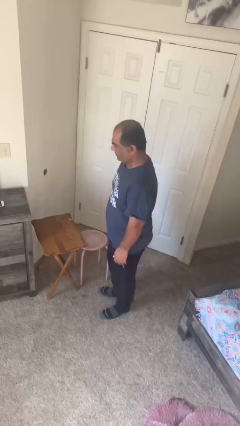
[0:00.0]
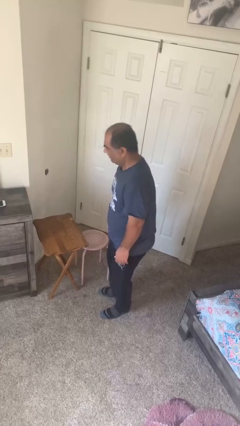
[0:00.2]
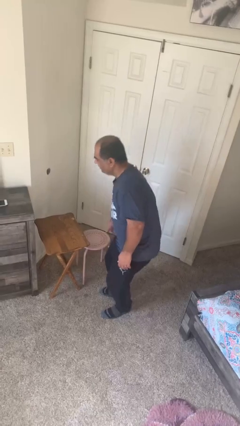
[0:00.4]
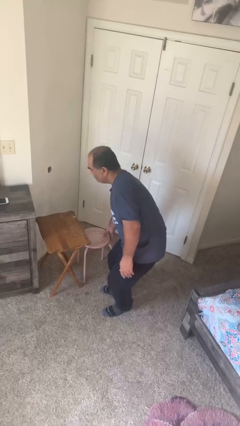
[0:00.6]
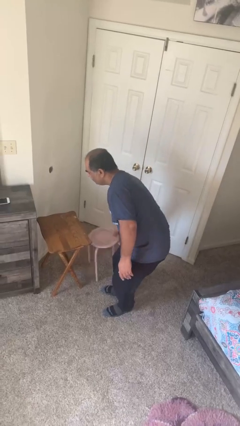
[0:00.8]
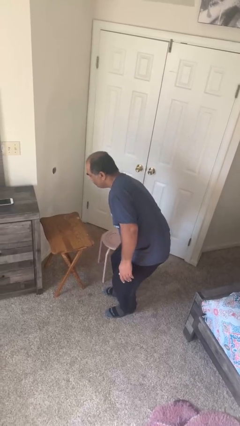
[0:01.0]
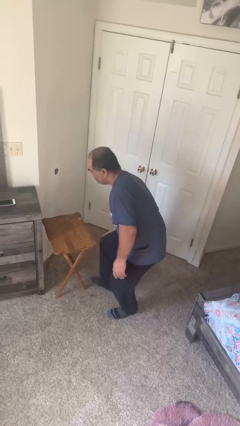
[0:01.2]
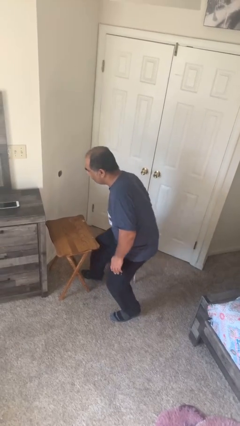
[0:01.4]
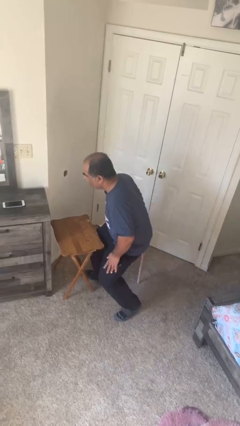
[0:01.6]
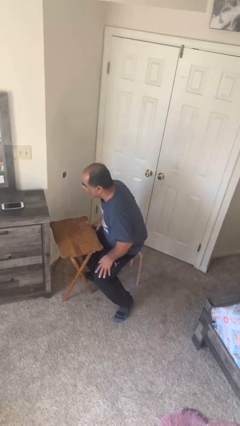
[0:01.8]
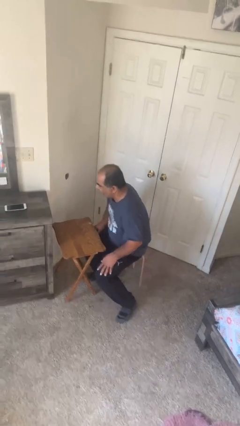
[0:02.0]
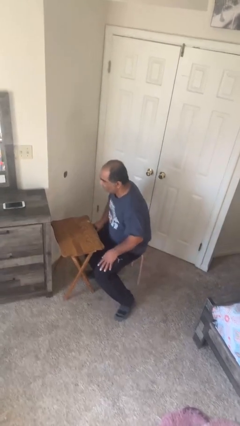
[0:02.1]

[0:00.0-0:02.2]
person sits down

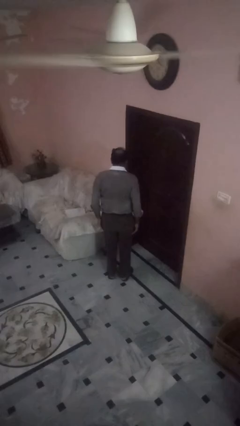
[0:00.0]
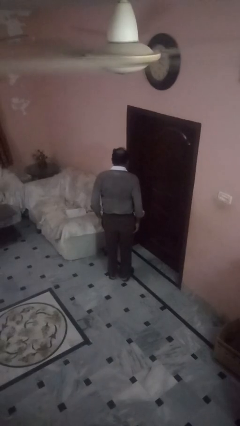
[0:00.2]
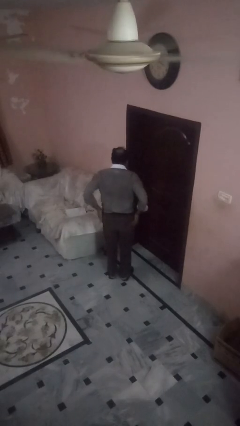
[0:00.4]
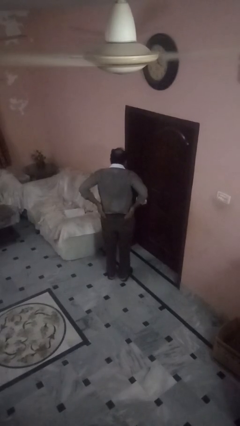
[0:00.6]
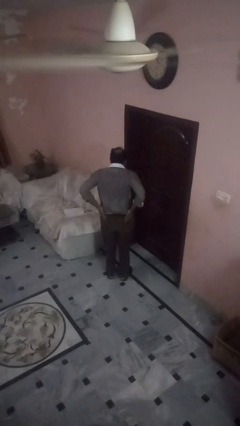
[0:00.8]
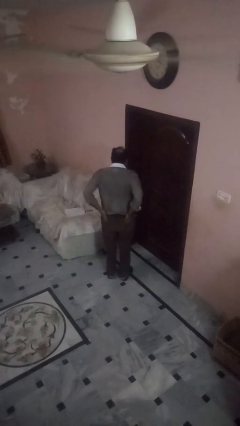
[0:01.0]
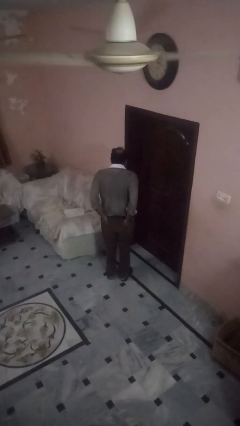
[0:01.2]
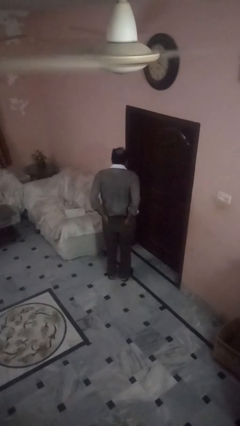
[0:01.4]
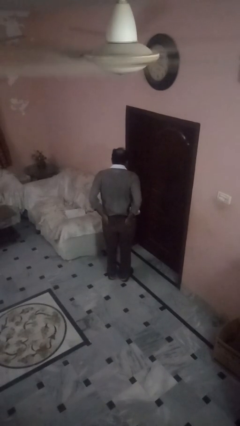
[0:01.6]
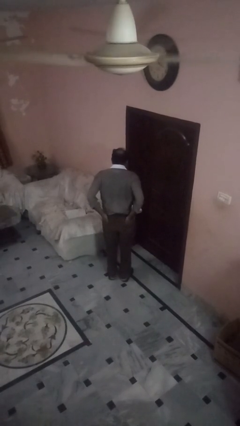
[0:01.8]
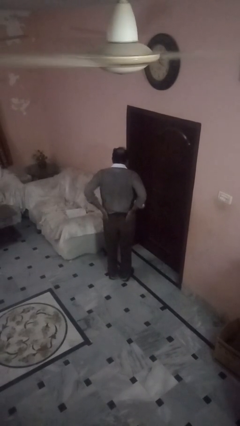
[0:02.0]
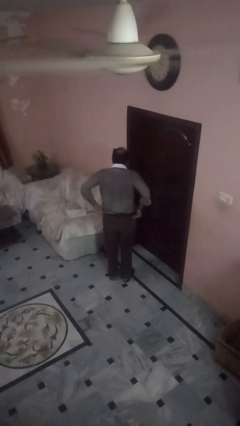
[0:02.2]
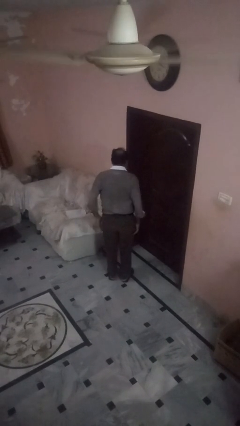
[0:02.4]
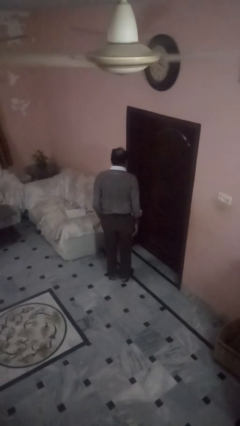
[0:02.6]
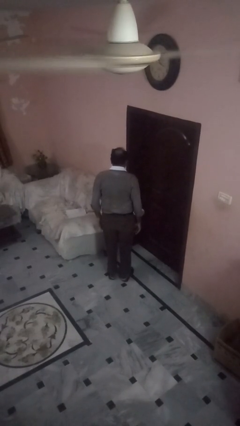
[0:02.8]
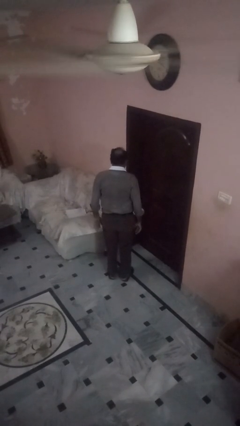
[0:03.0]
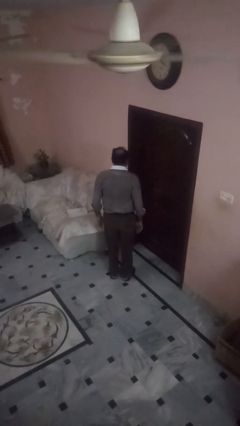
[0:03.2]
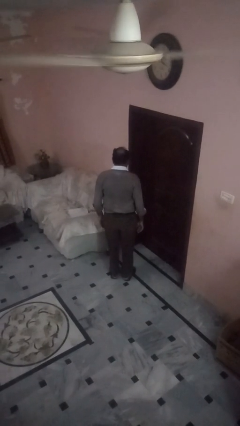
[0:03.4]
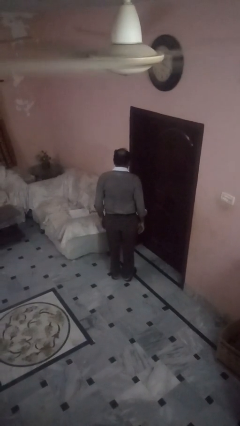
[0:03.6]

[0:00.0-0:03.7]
person puts hands in back pockets

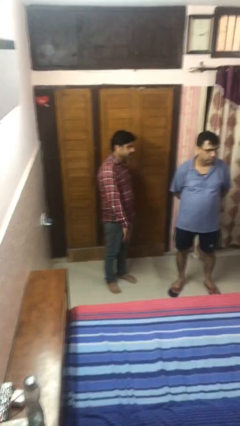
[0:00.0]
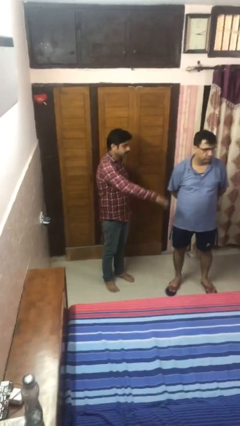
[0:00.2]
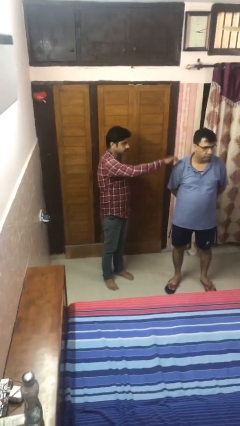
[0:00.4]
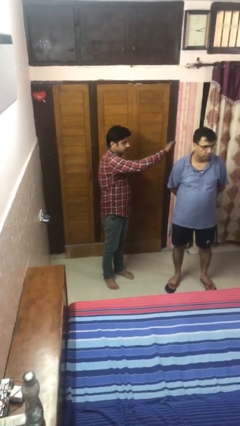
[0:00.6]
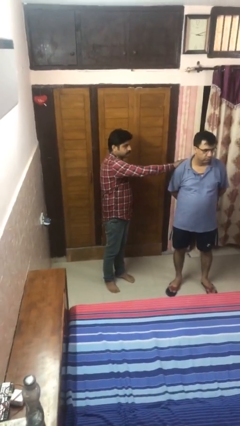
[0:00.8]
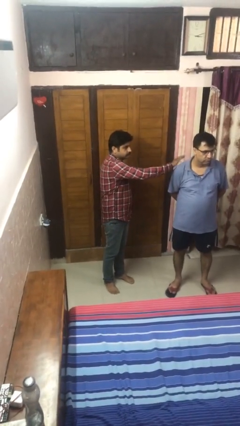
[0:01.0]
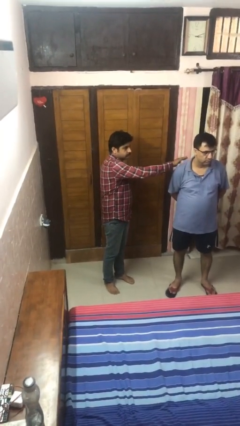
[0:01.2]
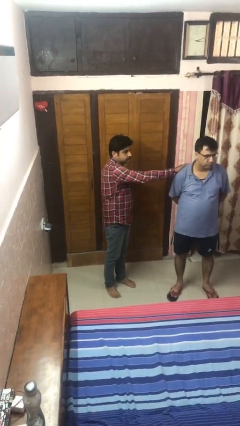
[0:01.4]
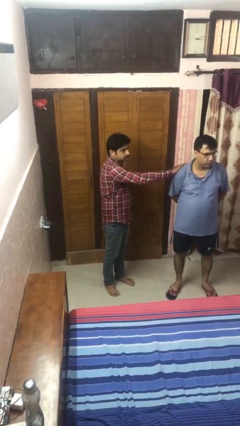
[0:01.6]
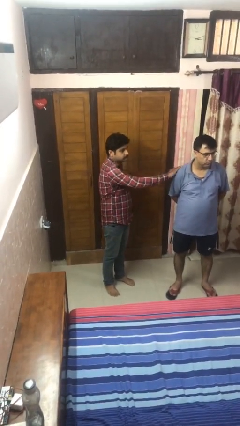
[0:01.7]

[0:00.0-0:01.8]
person pounds shoulders of person

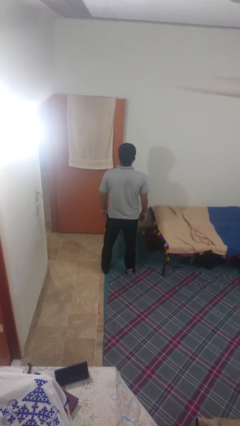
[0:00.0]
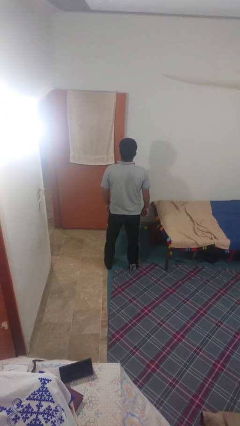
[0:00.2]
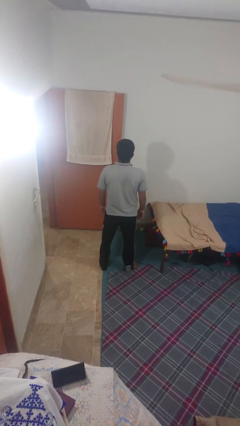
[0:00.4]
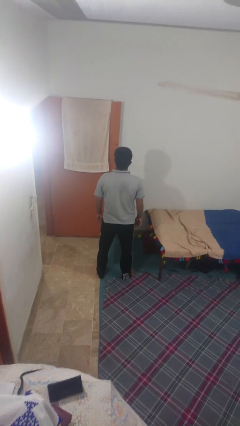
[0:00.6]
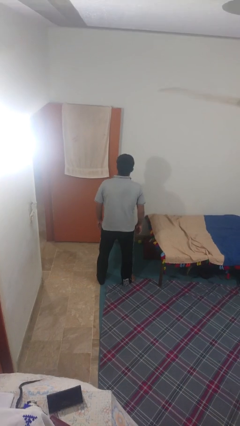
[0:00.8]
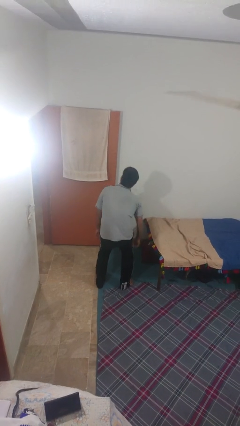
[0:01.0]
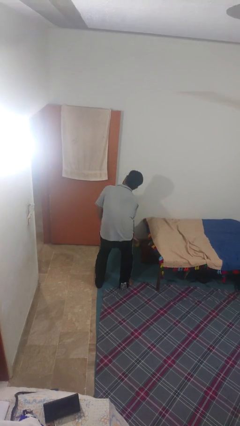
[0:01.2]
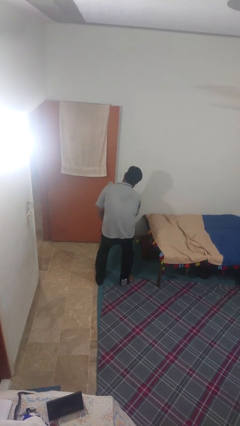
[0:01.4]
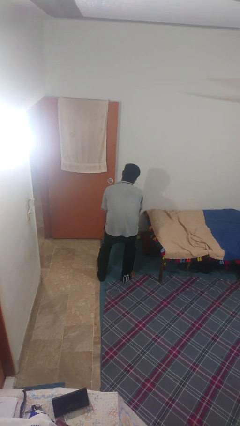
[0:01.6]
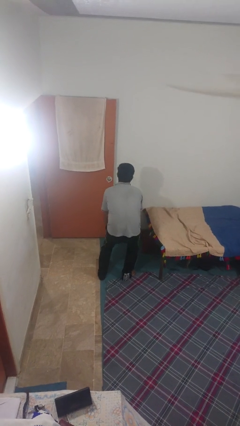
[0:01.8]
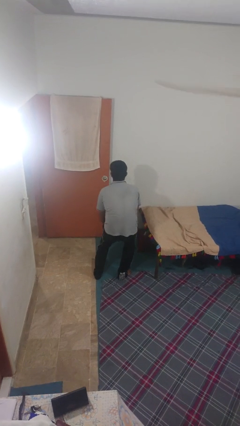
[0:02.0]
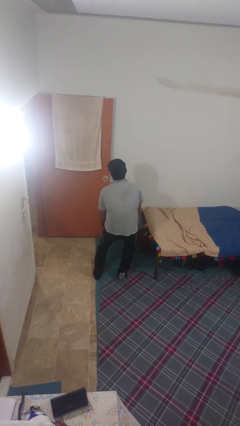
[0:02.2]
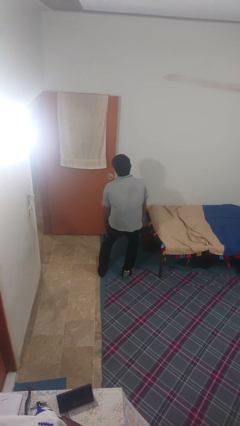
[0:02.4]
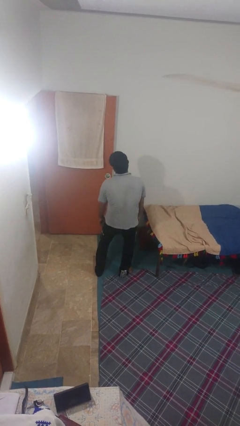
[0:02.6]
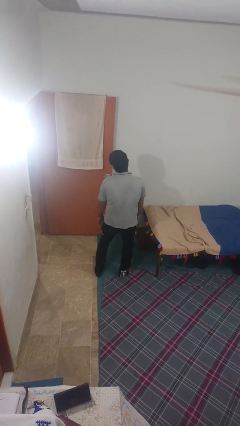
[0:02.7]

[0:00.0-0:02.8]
person gestures hang loose

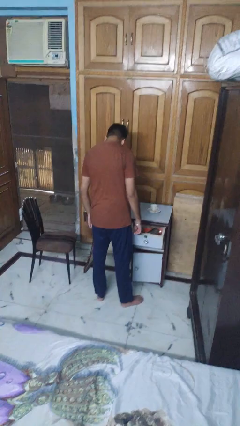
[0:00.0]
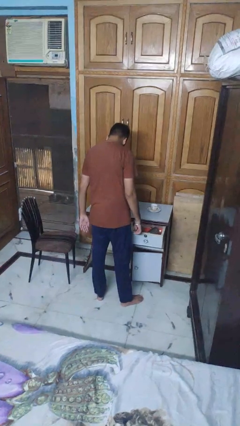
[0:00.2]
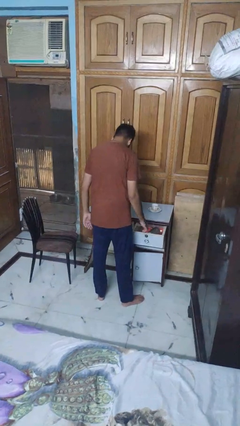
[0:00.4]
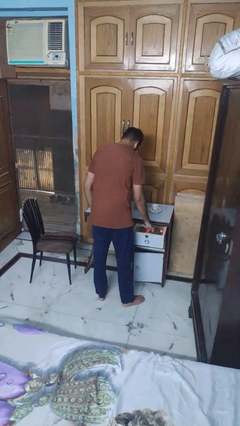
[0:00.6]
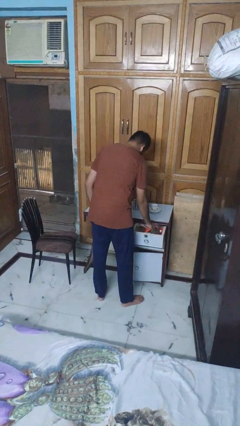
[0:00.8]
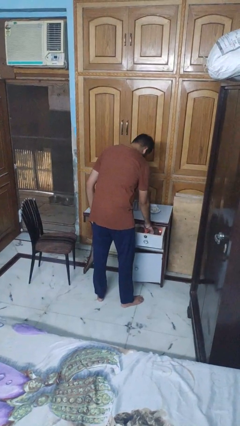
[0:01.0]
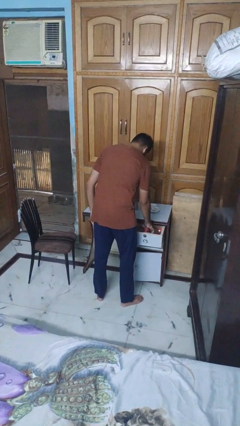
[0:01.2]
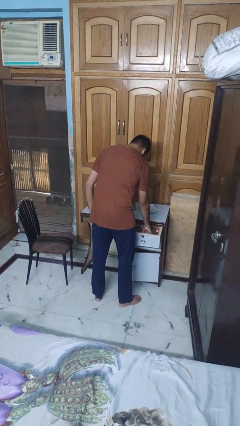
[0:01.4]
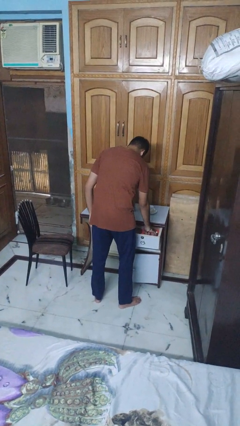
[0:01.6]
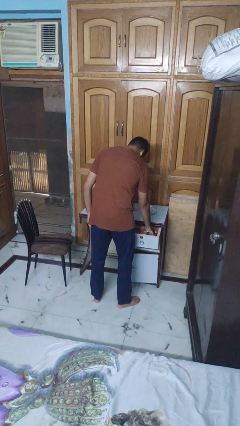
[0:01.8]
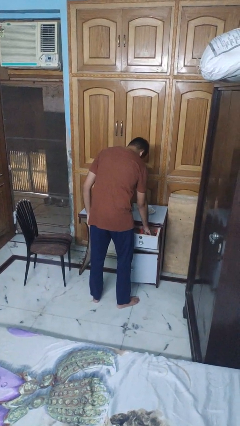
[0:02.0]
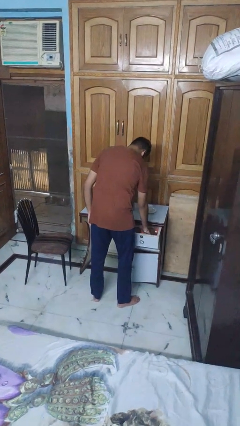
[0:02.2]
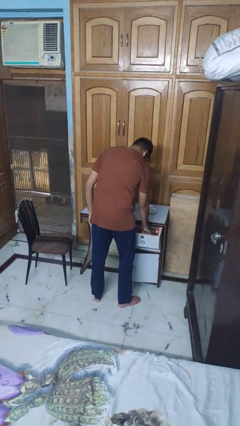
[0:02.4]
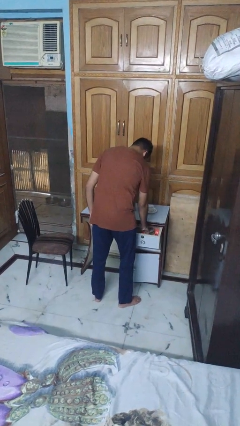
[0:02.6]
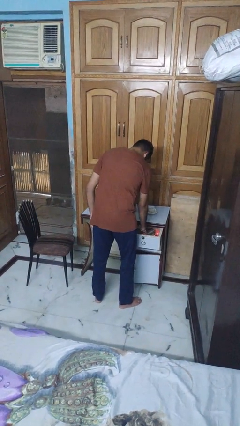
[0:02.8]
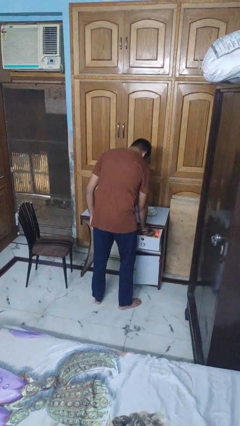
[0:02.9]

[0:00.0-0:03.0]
person searches in kitchen drawer

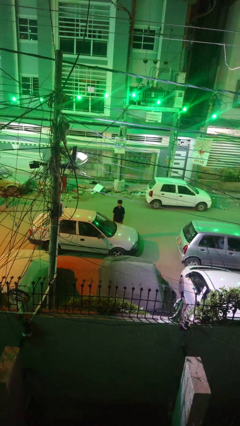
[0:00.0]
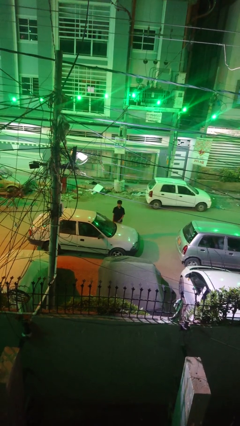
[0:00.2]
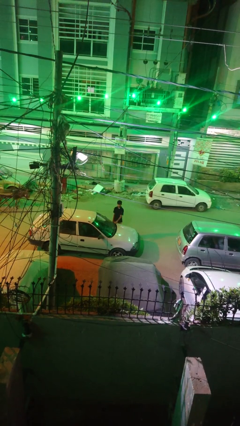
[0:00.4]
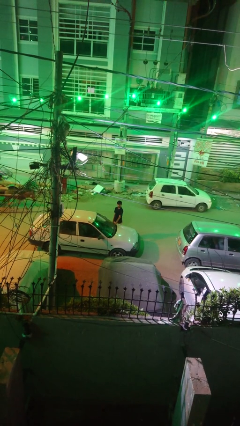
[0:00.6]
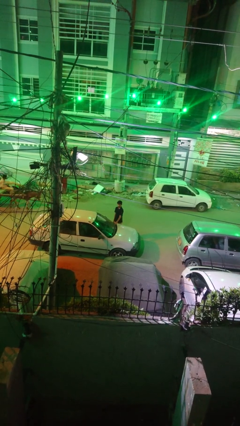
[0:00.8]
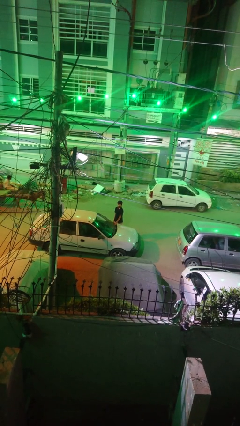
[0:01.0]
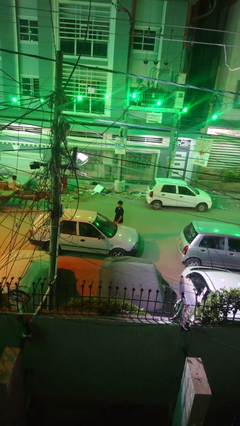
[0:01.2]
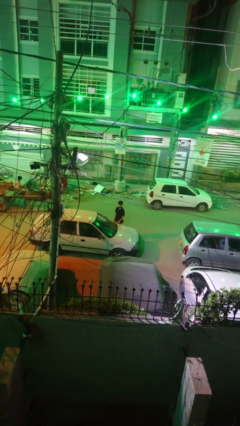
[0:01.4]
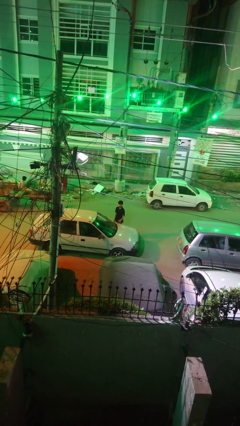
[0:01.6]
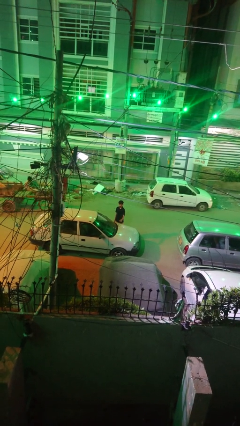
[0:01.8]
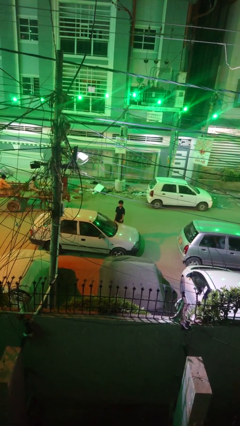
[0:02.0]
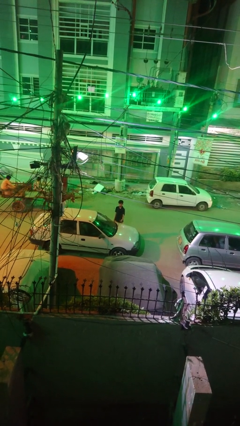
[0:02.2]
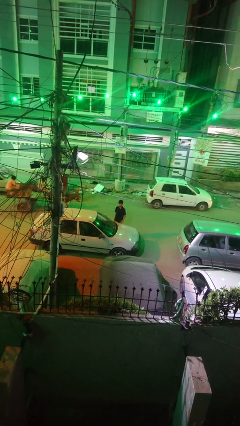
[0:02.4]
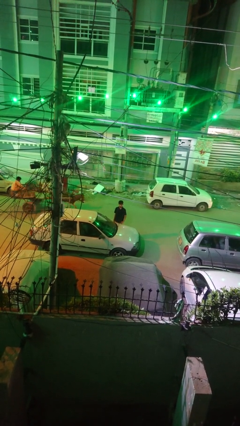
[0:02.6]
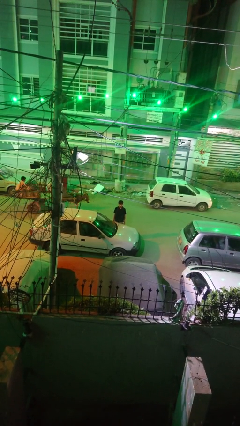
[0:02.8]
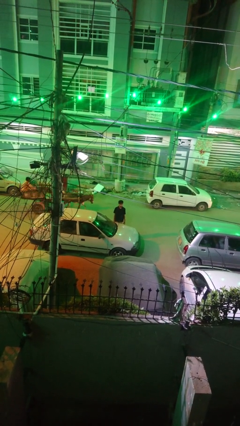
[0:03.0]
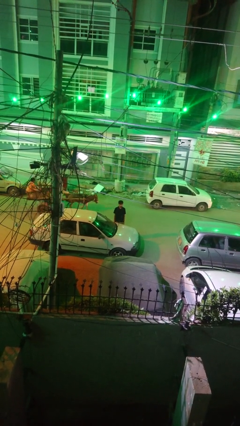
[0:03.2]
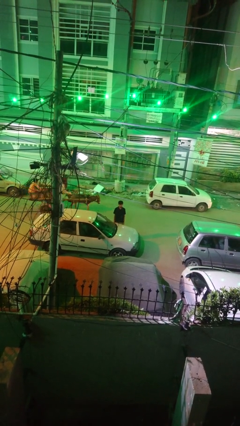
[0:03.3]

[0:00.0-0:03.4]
person flips up car wipers

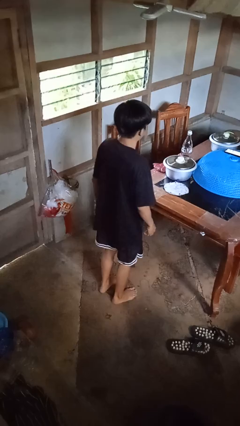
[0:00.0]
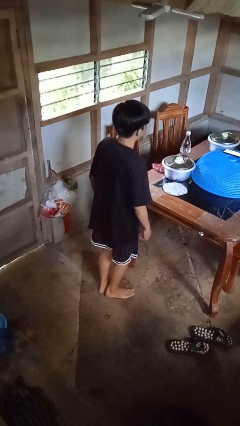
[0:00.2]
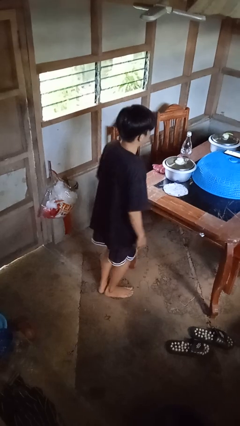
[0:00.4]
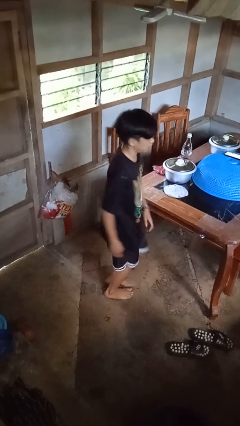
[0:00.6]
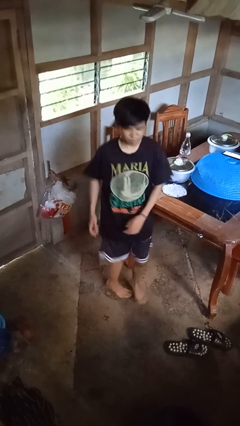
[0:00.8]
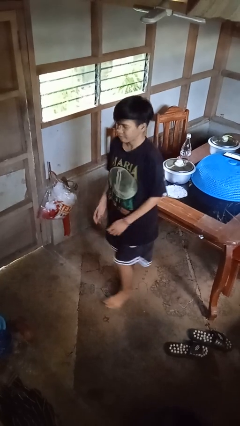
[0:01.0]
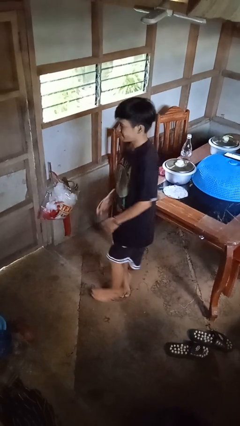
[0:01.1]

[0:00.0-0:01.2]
person twirls
